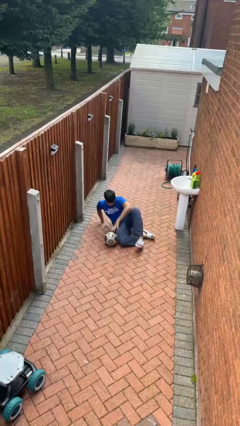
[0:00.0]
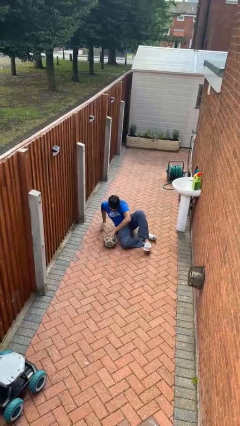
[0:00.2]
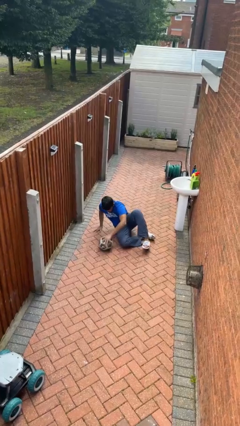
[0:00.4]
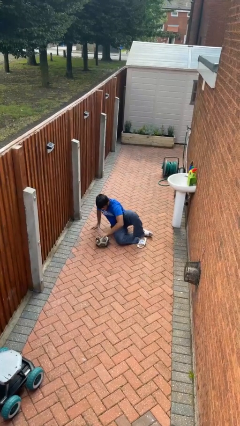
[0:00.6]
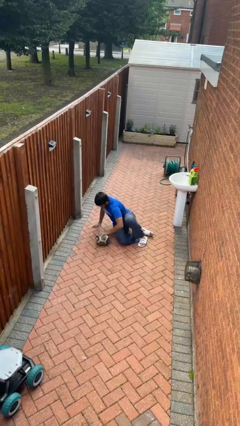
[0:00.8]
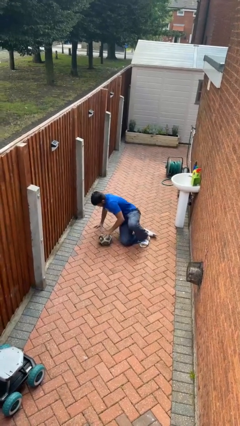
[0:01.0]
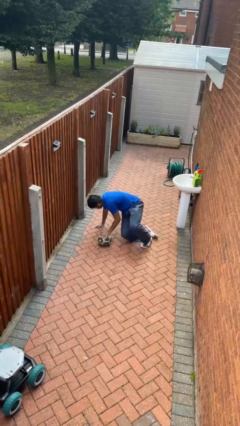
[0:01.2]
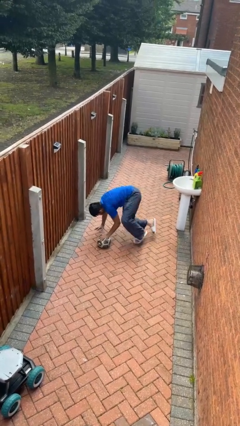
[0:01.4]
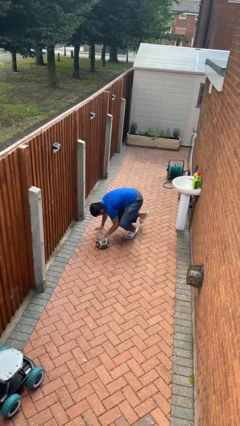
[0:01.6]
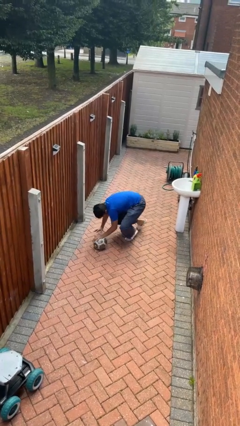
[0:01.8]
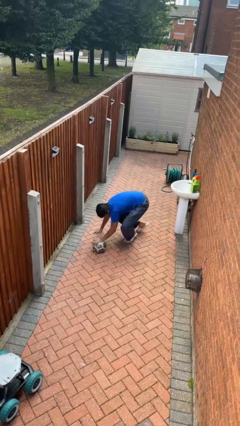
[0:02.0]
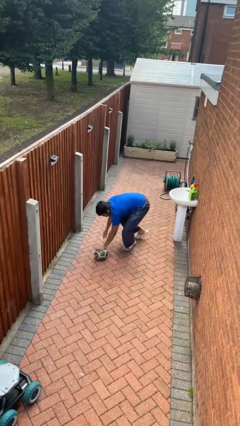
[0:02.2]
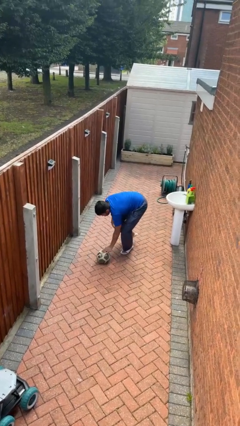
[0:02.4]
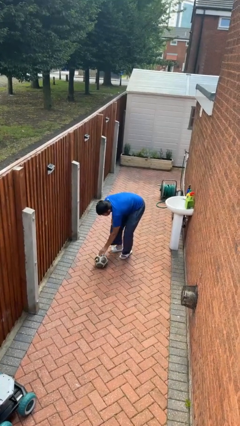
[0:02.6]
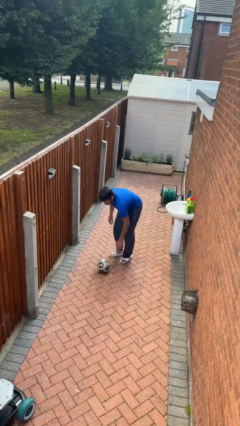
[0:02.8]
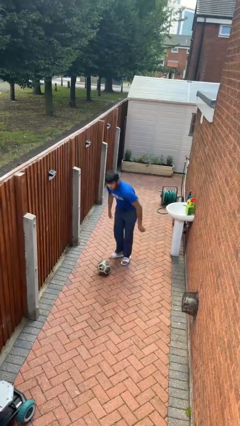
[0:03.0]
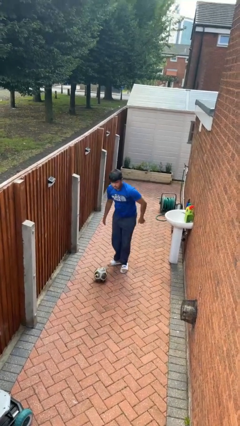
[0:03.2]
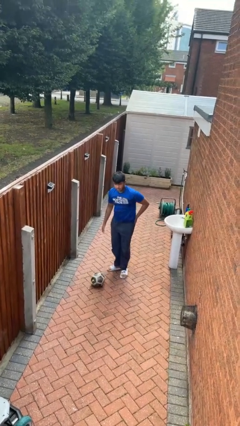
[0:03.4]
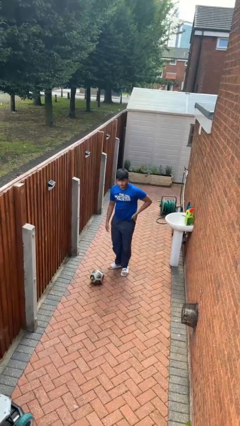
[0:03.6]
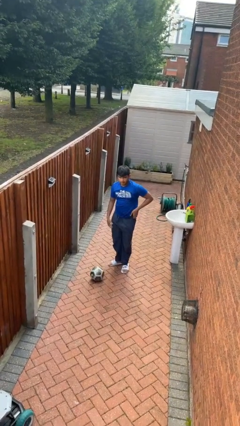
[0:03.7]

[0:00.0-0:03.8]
person stands up from floor

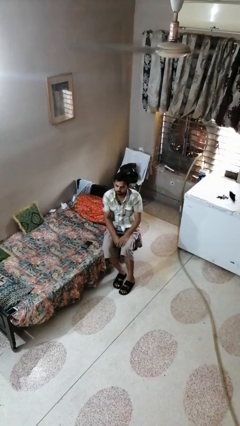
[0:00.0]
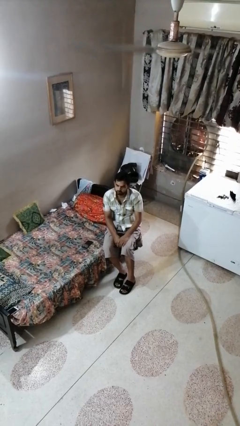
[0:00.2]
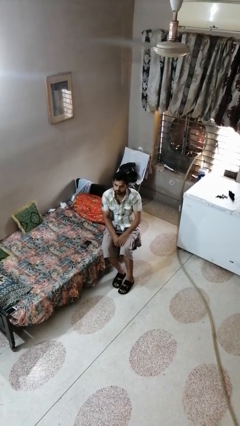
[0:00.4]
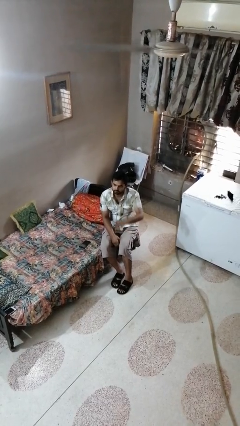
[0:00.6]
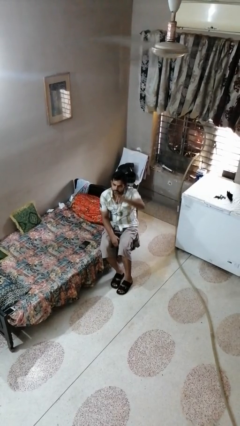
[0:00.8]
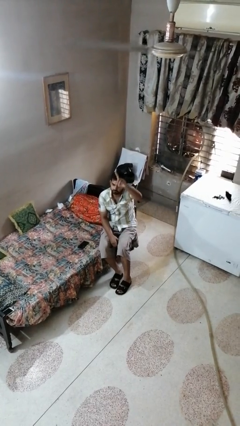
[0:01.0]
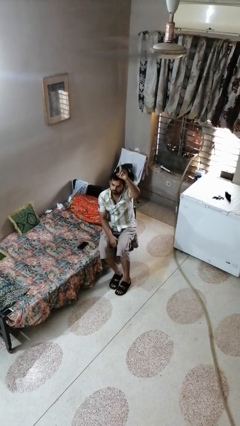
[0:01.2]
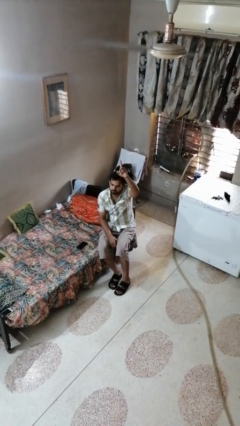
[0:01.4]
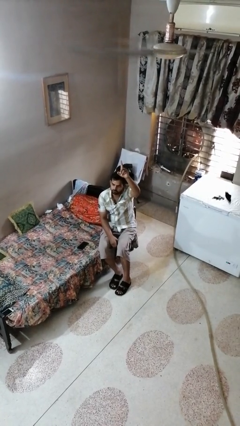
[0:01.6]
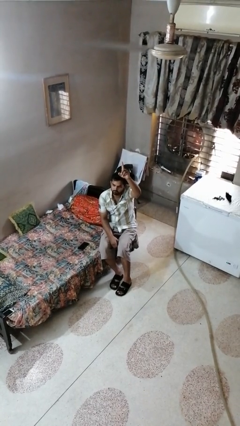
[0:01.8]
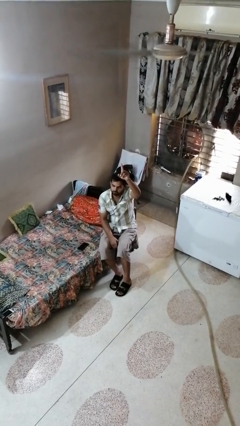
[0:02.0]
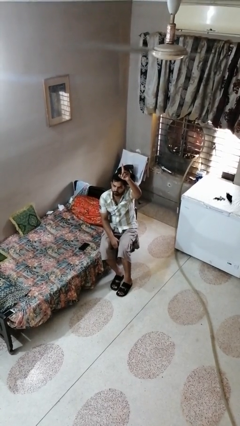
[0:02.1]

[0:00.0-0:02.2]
person gestures raise hand

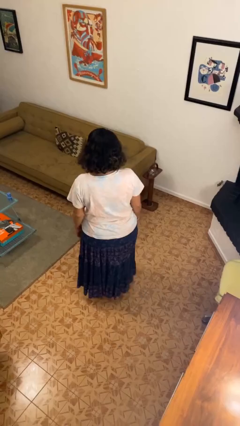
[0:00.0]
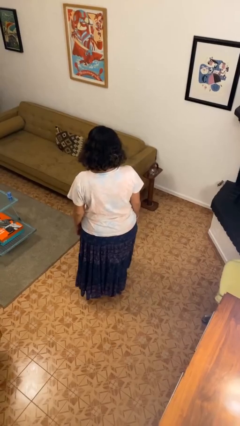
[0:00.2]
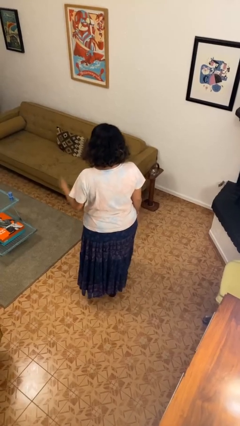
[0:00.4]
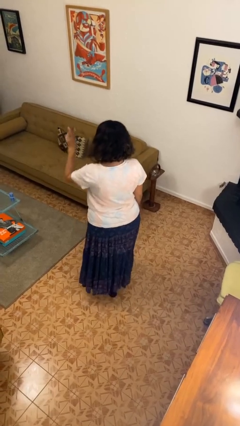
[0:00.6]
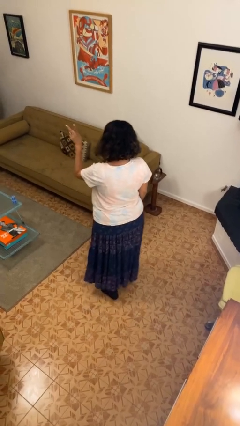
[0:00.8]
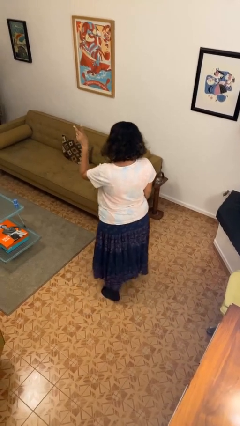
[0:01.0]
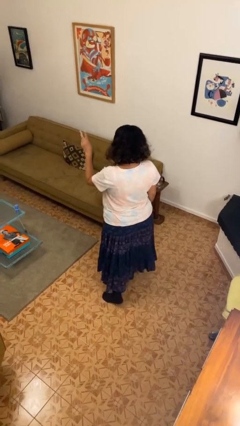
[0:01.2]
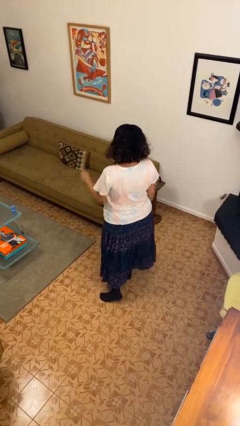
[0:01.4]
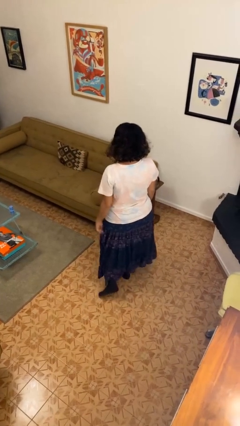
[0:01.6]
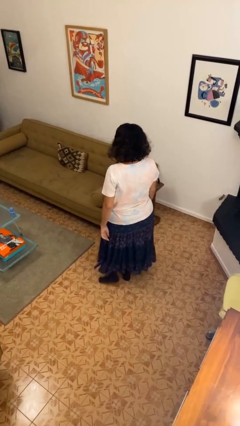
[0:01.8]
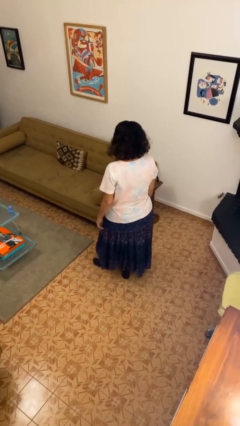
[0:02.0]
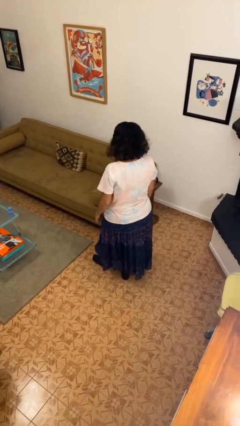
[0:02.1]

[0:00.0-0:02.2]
person gestures peace

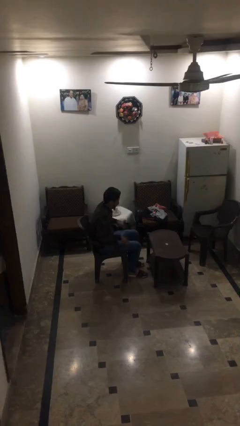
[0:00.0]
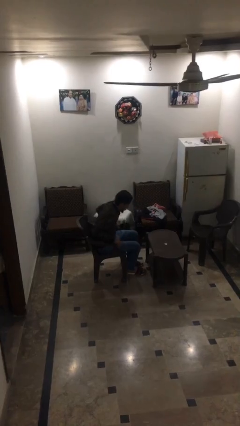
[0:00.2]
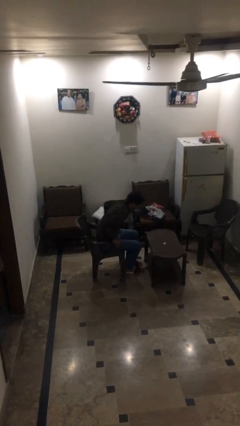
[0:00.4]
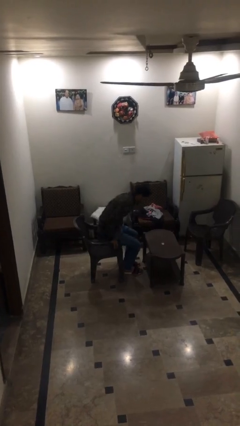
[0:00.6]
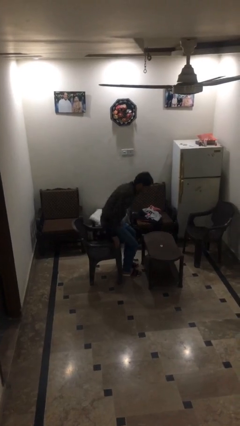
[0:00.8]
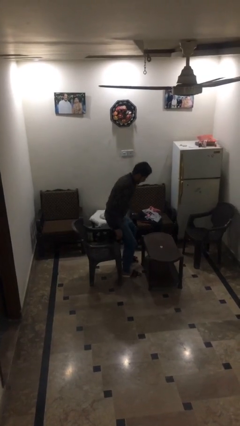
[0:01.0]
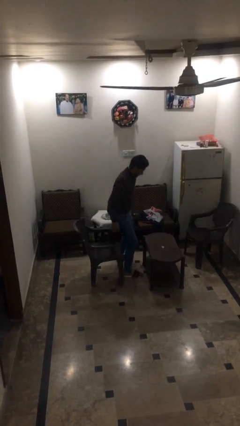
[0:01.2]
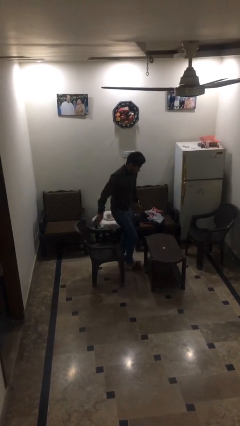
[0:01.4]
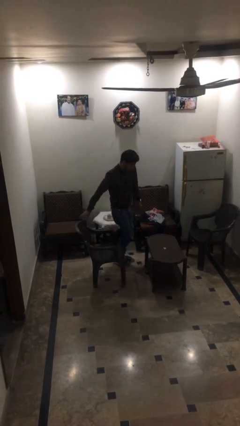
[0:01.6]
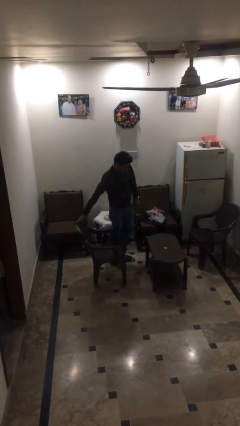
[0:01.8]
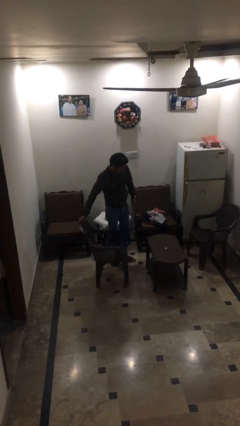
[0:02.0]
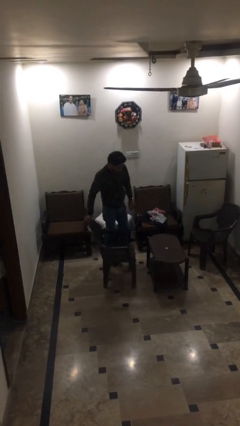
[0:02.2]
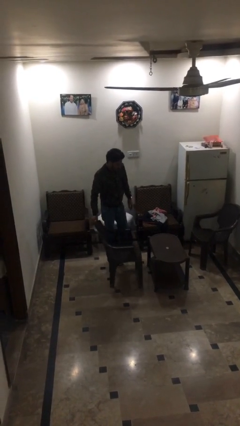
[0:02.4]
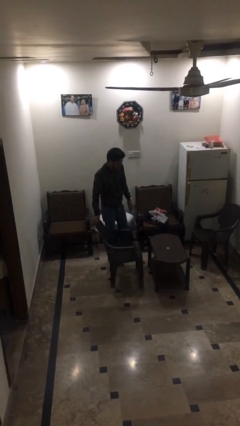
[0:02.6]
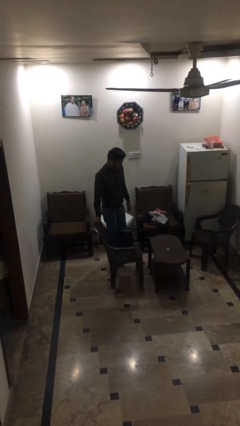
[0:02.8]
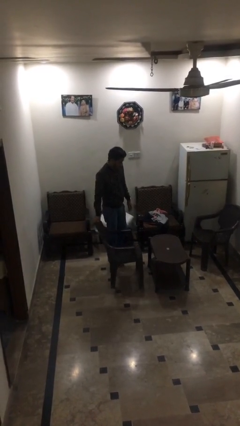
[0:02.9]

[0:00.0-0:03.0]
person stands up

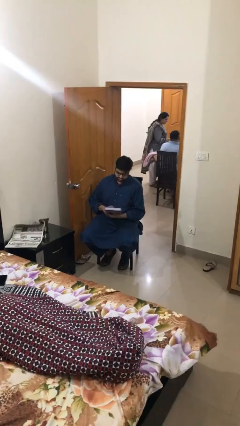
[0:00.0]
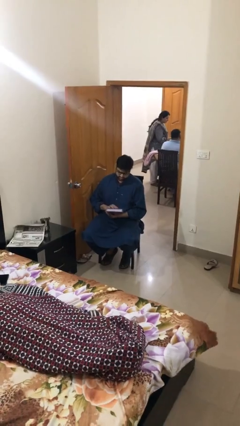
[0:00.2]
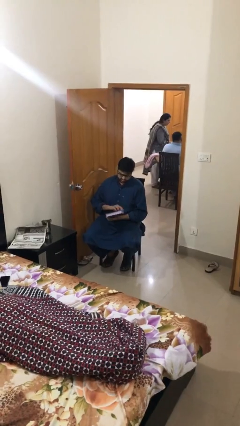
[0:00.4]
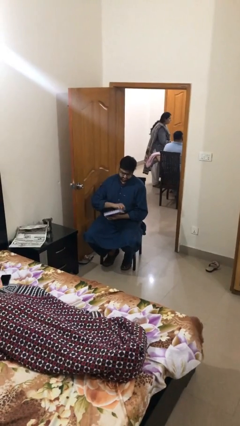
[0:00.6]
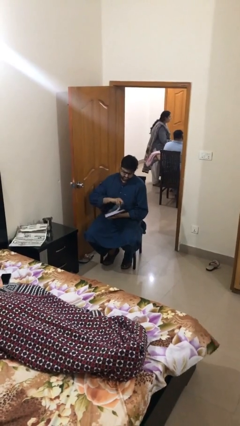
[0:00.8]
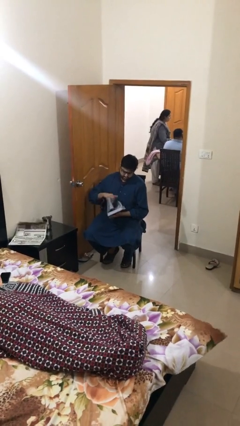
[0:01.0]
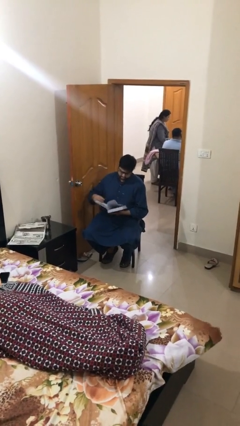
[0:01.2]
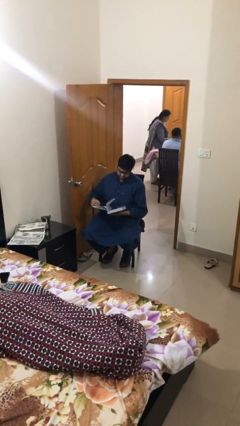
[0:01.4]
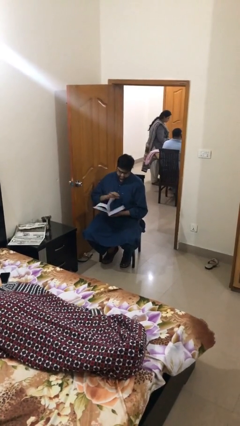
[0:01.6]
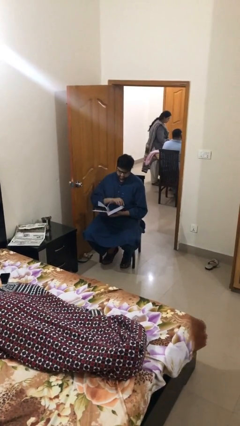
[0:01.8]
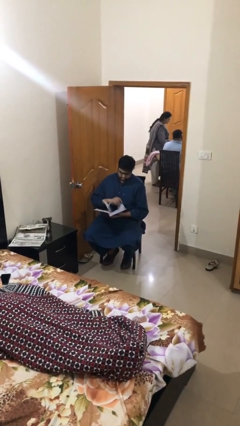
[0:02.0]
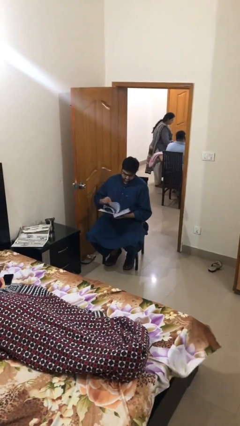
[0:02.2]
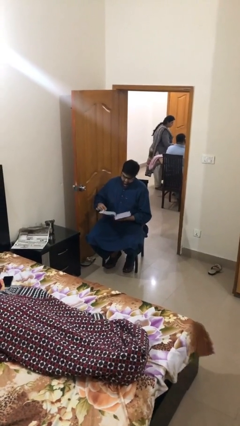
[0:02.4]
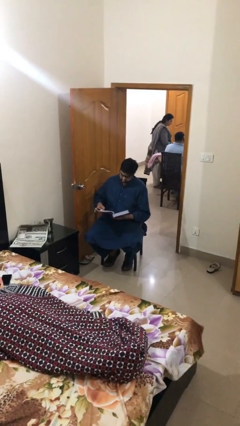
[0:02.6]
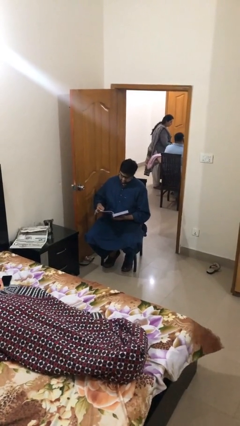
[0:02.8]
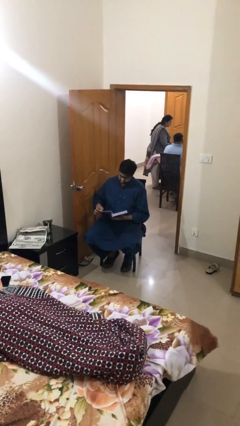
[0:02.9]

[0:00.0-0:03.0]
person reads document

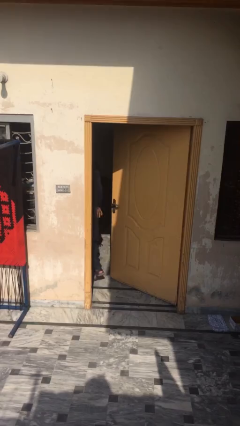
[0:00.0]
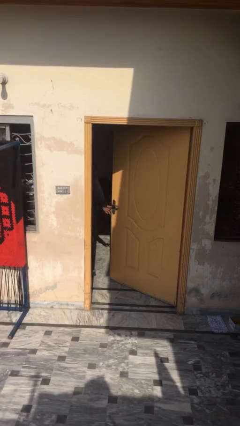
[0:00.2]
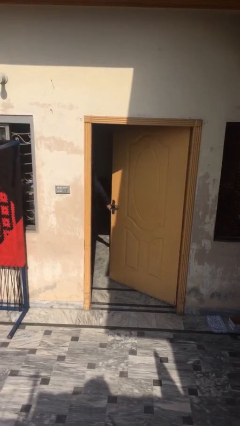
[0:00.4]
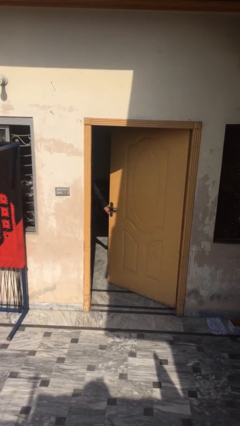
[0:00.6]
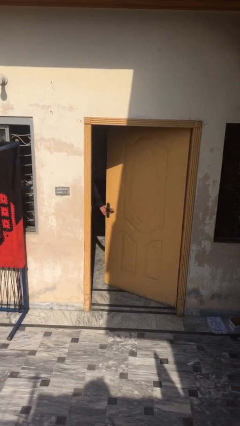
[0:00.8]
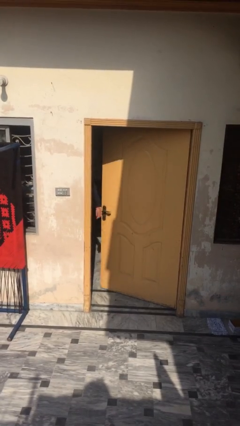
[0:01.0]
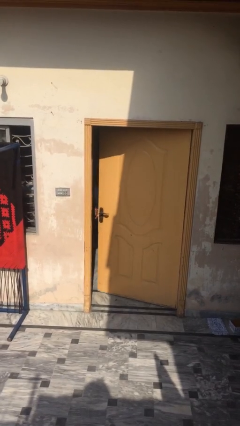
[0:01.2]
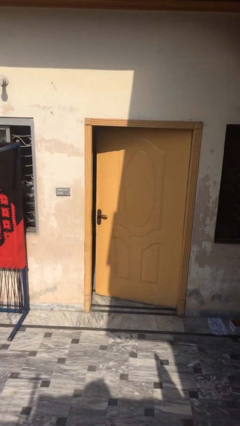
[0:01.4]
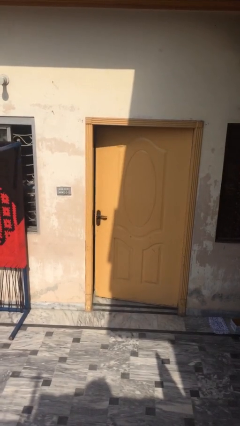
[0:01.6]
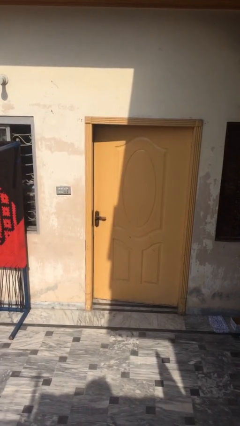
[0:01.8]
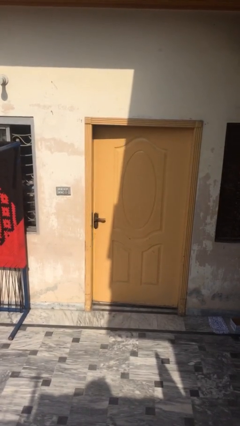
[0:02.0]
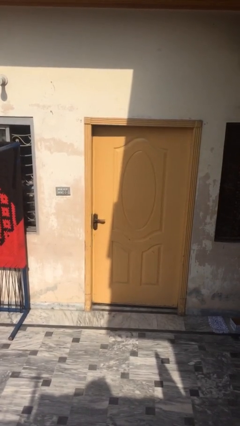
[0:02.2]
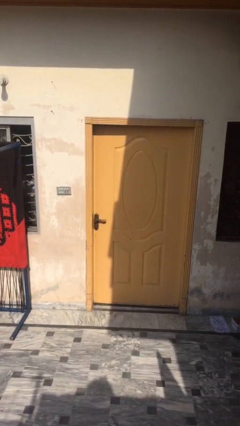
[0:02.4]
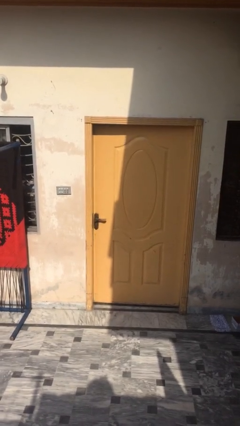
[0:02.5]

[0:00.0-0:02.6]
person closes facility door

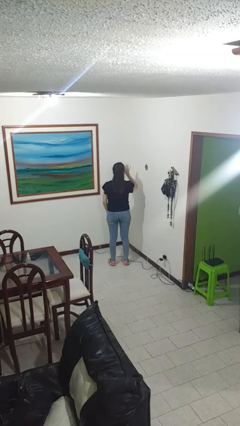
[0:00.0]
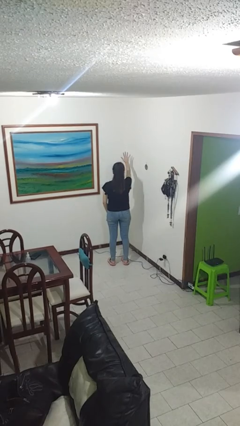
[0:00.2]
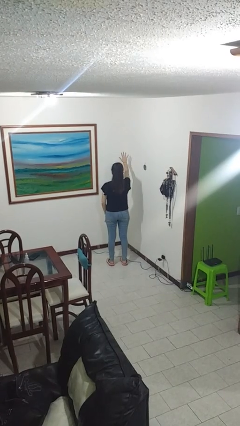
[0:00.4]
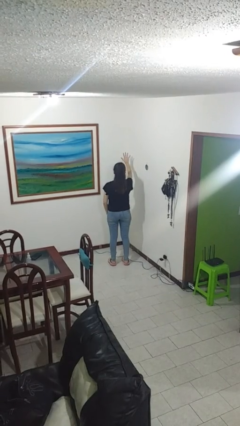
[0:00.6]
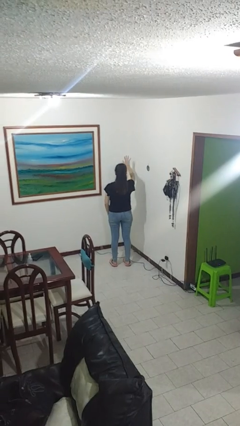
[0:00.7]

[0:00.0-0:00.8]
person gestures number five
